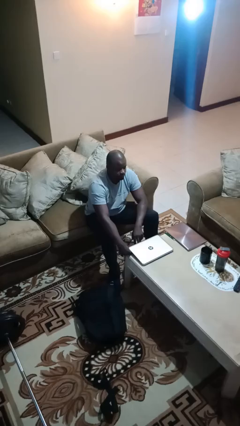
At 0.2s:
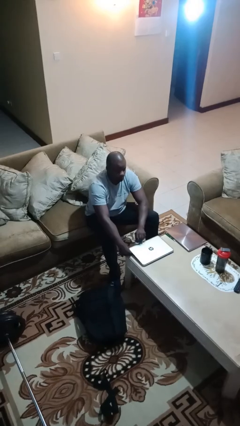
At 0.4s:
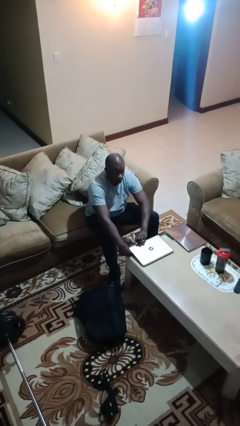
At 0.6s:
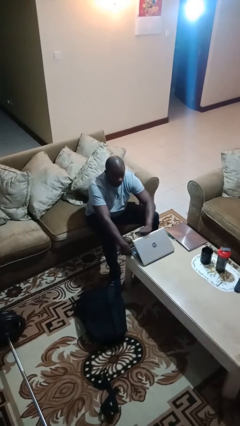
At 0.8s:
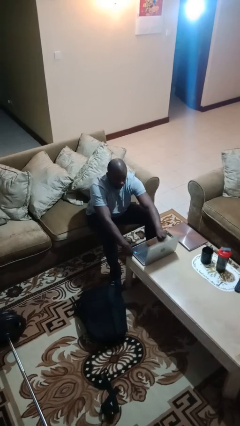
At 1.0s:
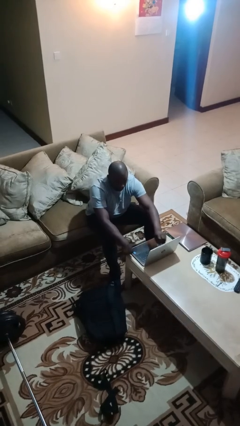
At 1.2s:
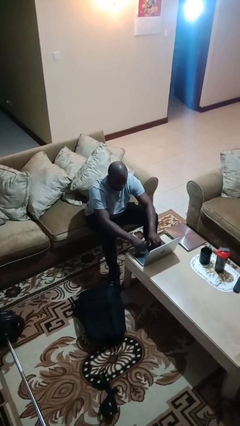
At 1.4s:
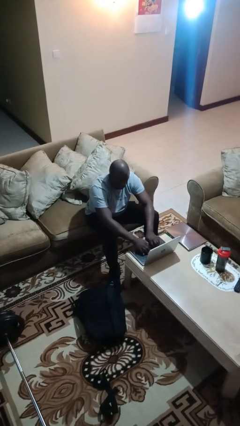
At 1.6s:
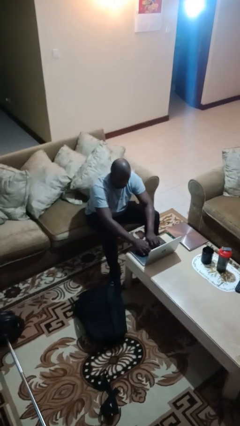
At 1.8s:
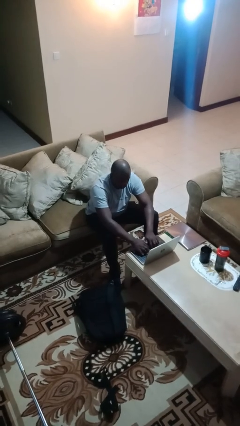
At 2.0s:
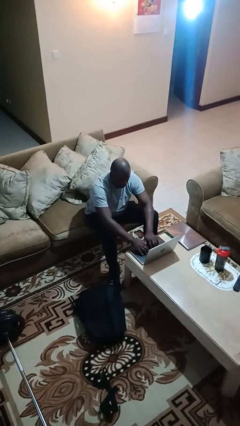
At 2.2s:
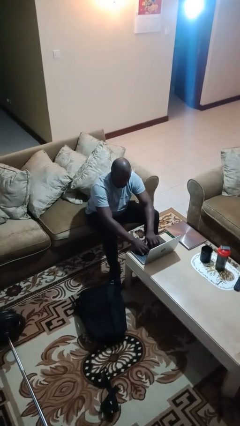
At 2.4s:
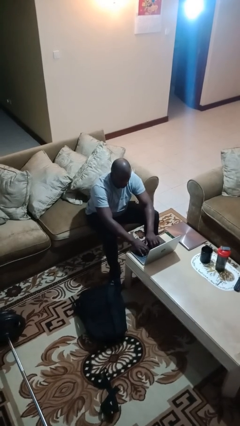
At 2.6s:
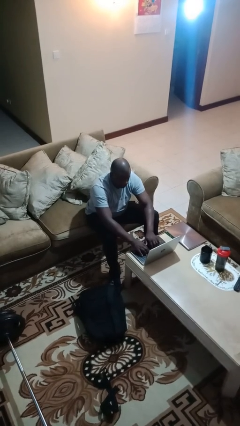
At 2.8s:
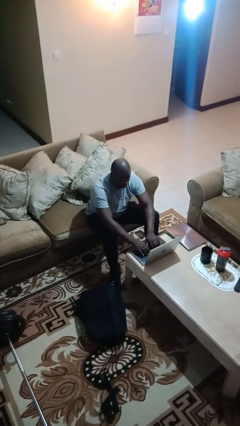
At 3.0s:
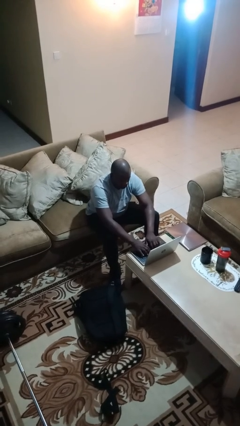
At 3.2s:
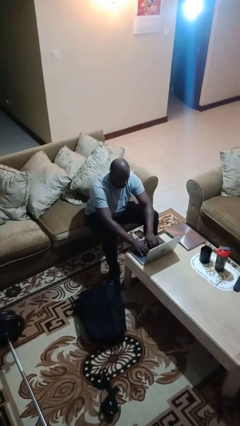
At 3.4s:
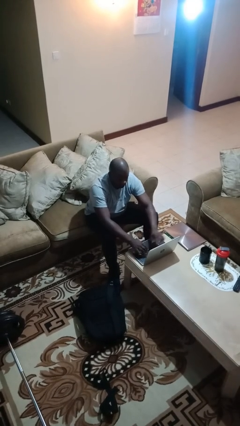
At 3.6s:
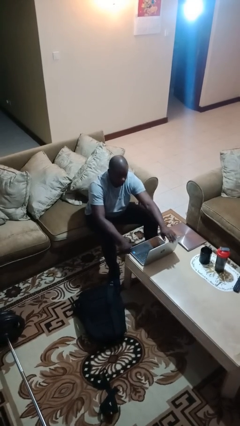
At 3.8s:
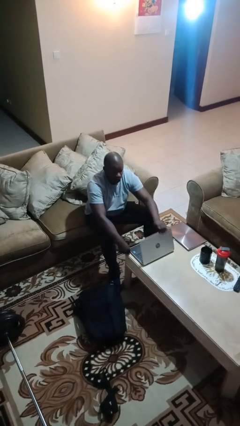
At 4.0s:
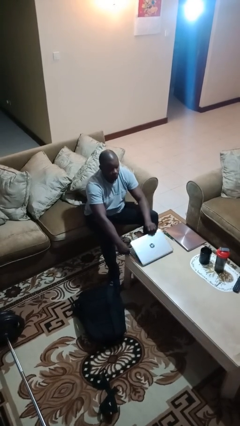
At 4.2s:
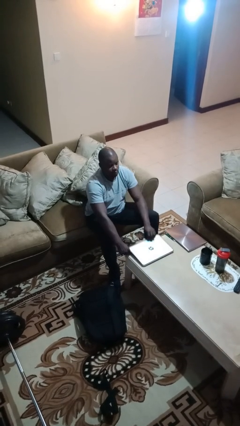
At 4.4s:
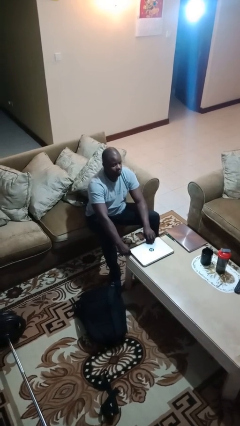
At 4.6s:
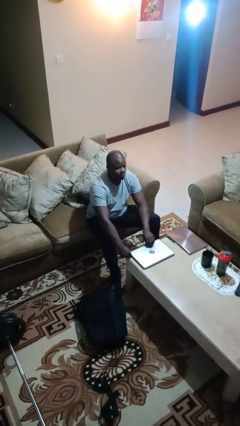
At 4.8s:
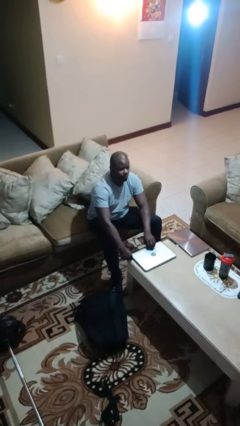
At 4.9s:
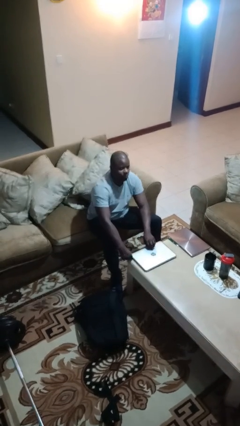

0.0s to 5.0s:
person interacts with laptop

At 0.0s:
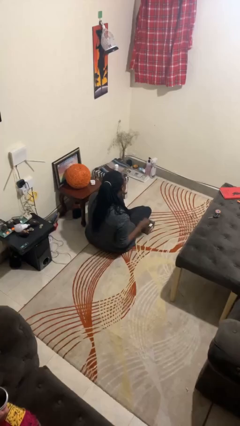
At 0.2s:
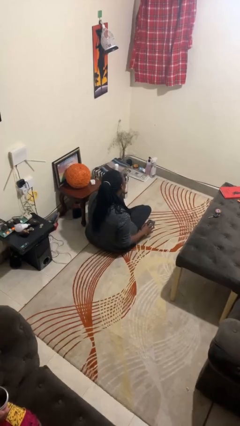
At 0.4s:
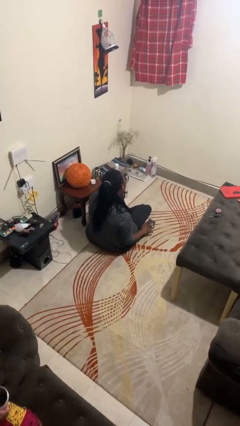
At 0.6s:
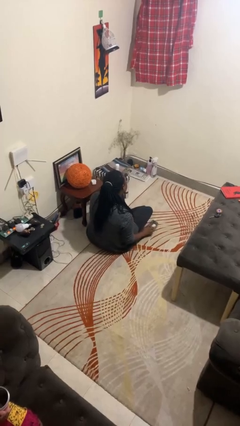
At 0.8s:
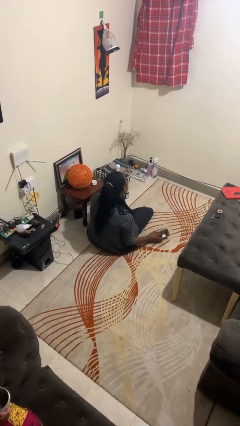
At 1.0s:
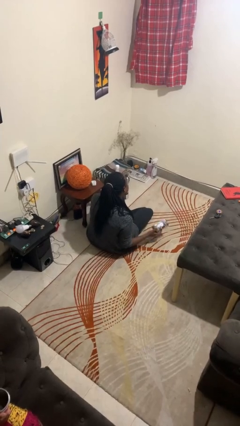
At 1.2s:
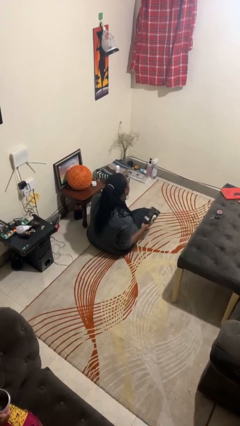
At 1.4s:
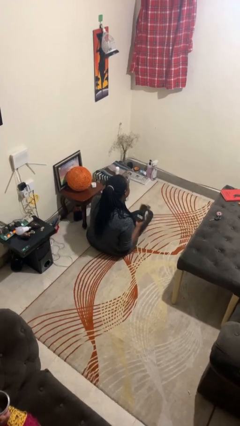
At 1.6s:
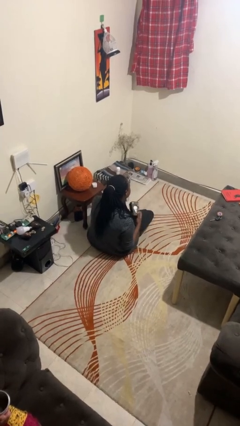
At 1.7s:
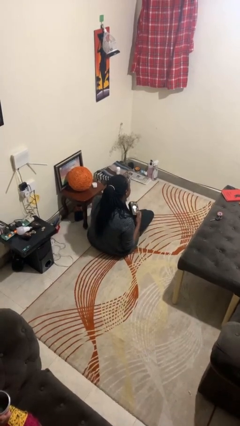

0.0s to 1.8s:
person picks up object from floor

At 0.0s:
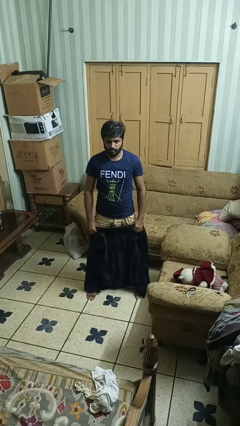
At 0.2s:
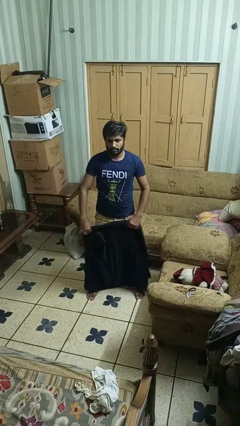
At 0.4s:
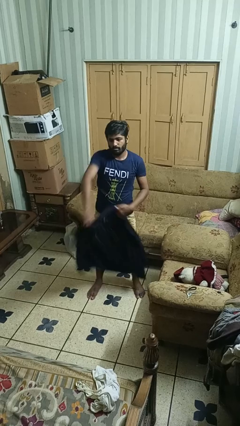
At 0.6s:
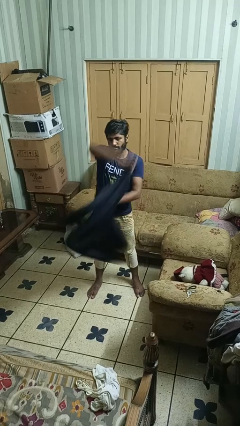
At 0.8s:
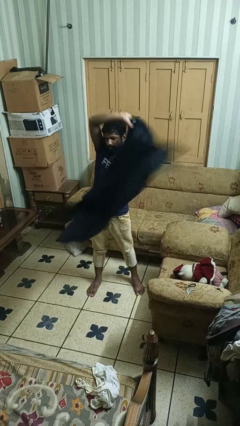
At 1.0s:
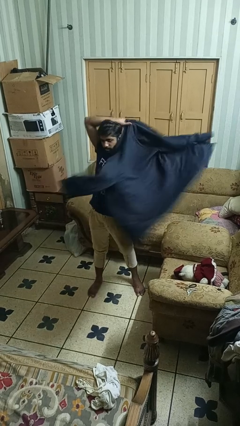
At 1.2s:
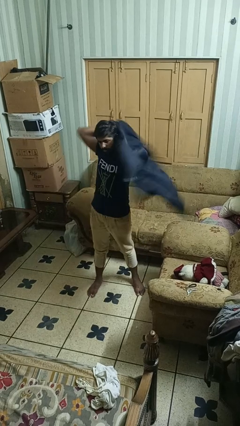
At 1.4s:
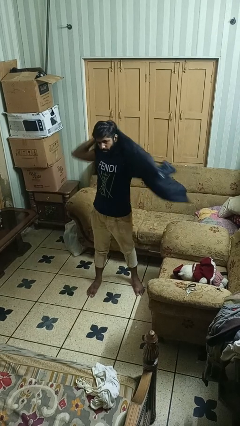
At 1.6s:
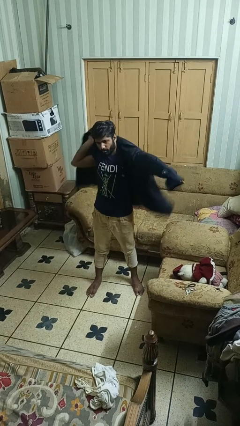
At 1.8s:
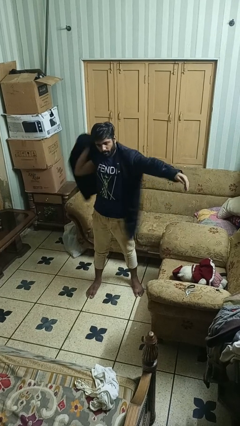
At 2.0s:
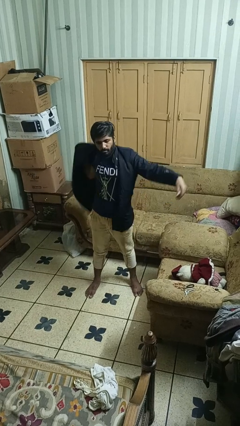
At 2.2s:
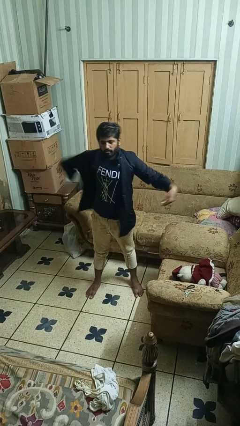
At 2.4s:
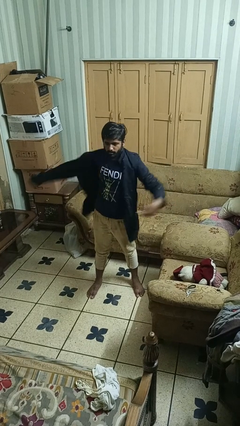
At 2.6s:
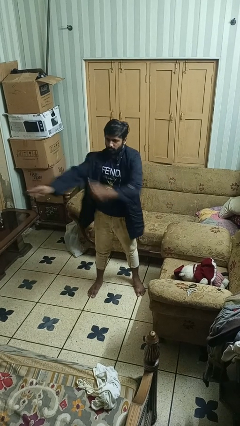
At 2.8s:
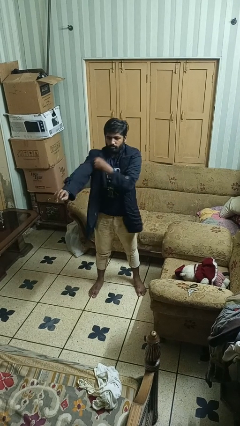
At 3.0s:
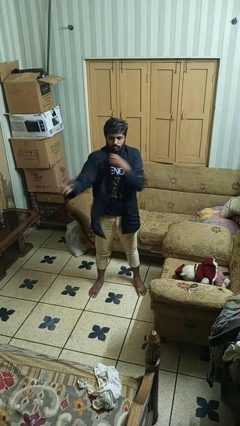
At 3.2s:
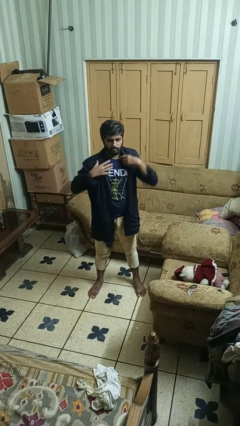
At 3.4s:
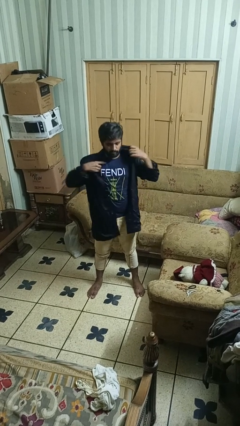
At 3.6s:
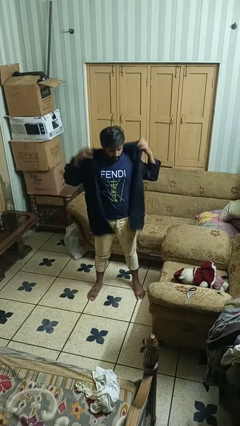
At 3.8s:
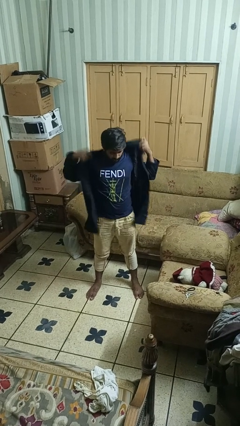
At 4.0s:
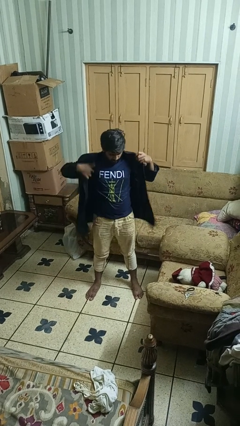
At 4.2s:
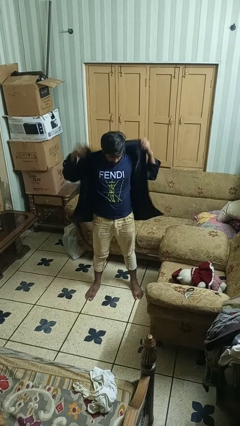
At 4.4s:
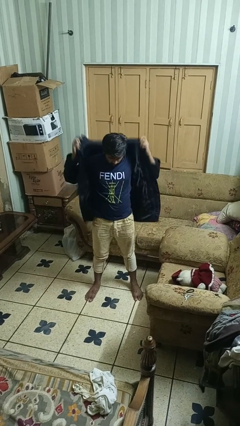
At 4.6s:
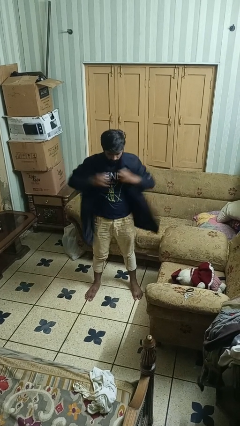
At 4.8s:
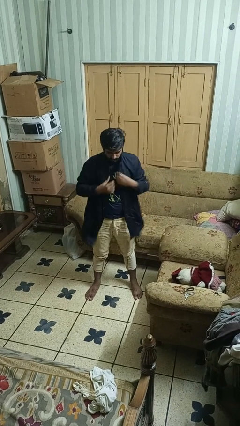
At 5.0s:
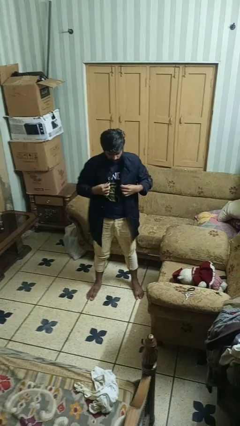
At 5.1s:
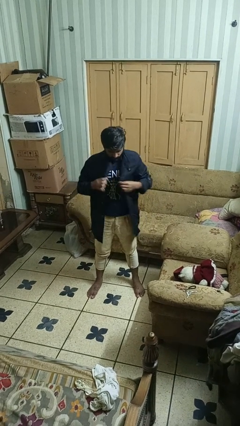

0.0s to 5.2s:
person puts on jacket

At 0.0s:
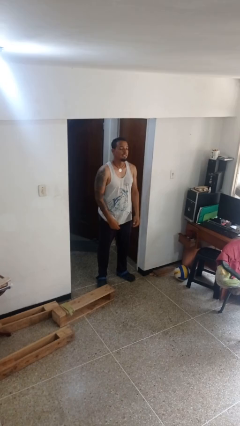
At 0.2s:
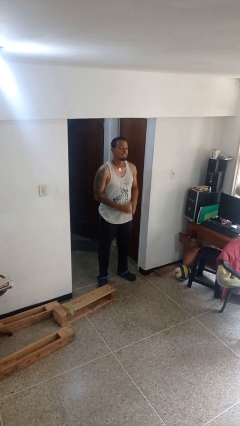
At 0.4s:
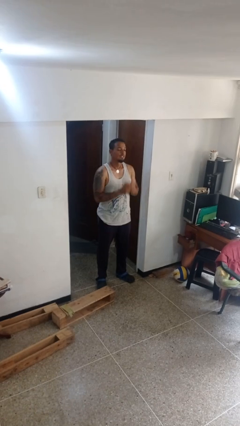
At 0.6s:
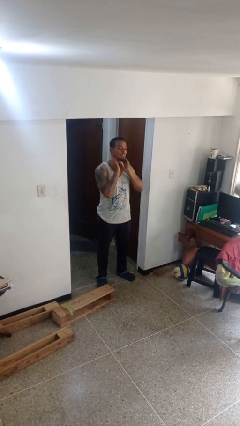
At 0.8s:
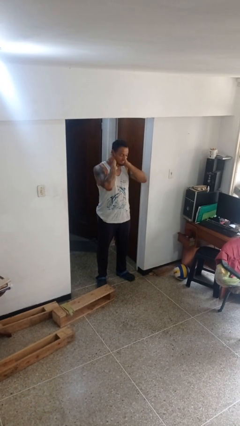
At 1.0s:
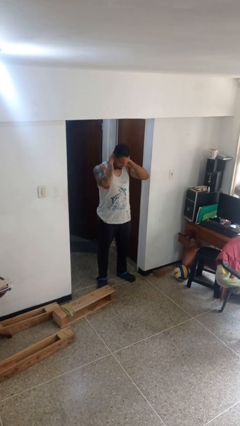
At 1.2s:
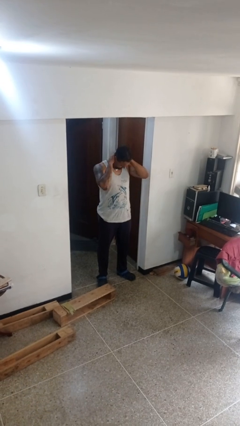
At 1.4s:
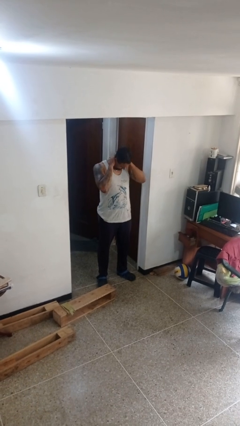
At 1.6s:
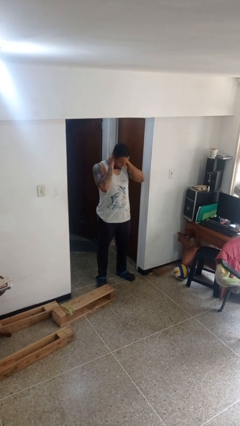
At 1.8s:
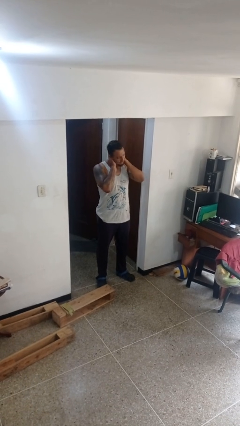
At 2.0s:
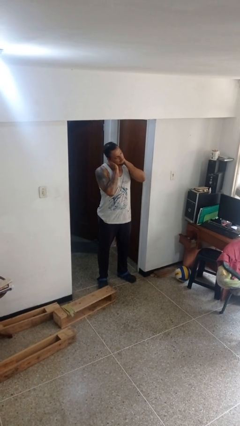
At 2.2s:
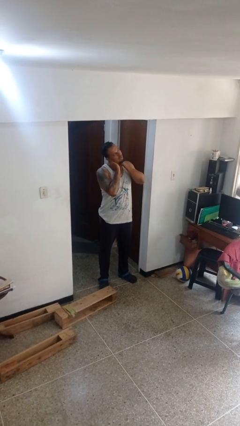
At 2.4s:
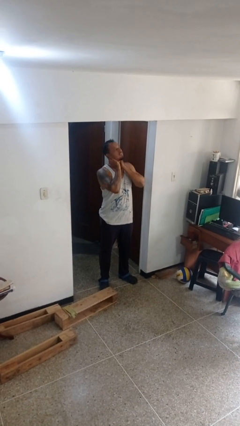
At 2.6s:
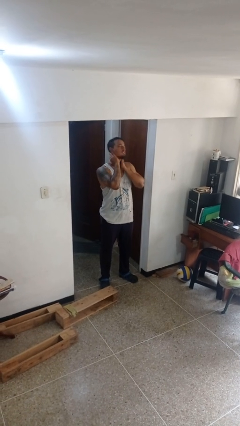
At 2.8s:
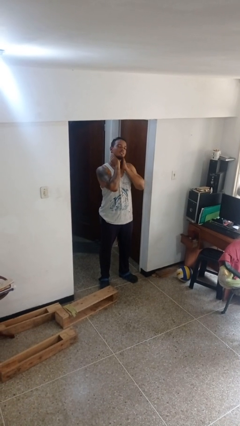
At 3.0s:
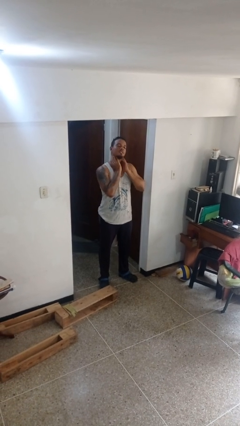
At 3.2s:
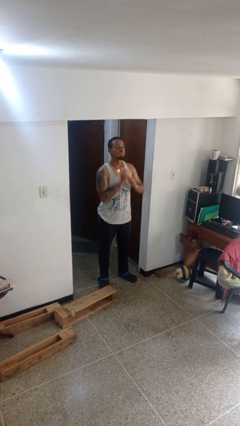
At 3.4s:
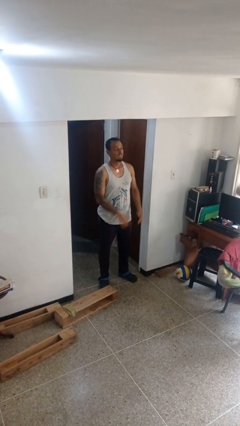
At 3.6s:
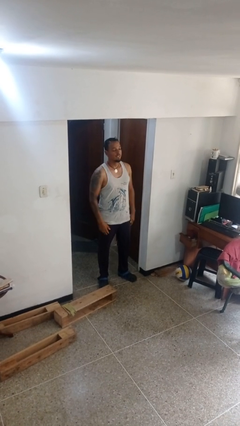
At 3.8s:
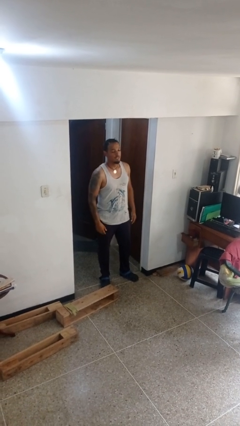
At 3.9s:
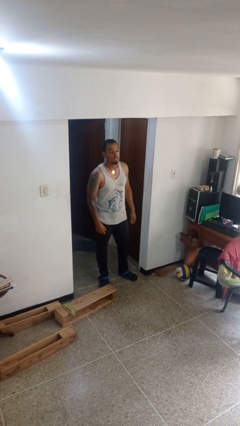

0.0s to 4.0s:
person rubs neck

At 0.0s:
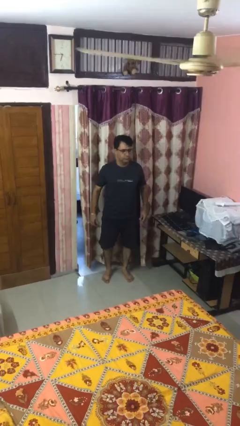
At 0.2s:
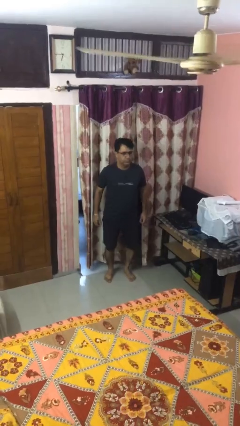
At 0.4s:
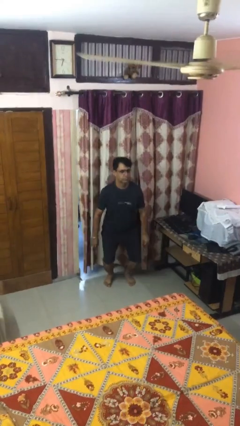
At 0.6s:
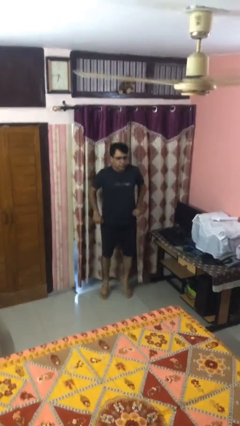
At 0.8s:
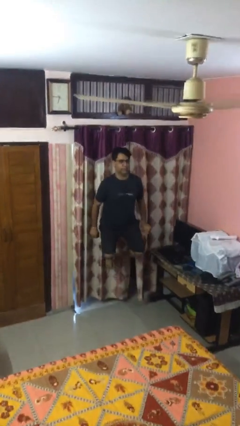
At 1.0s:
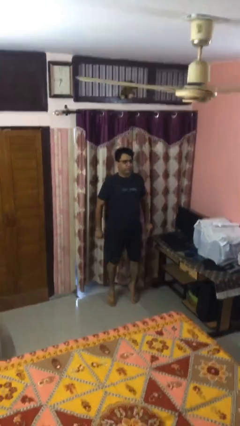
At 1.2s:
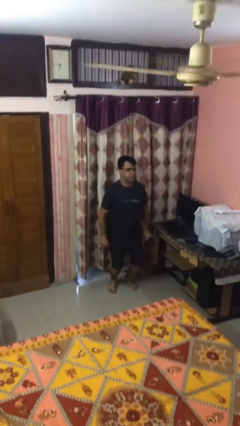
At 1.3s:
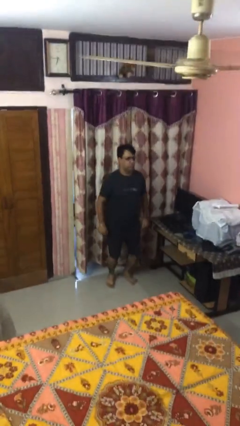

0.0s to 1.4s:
person jumps

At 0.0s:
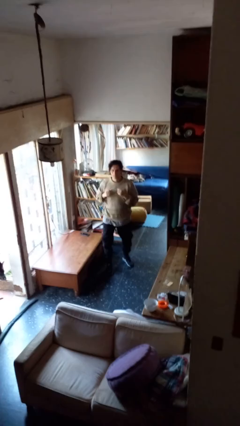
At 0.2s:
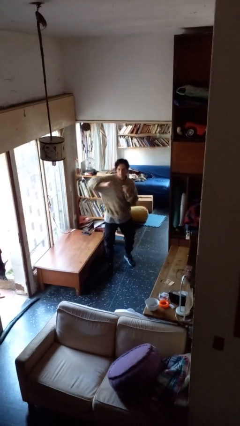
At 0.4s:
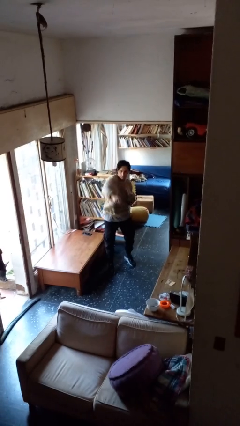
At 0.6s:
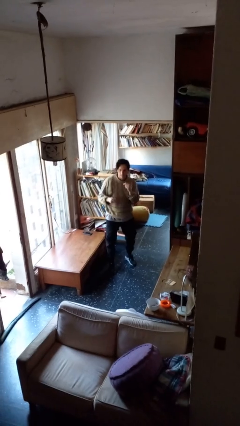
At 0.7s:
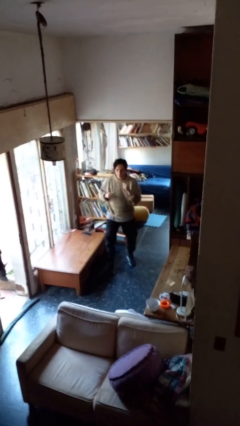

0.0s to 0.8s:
person karate chop
